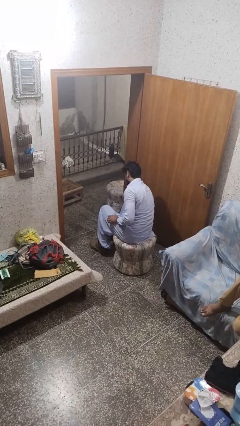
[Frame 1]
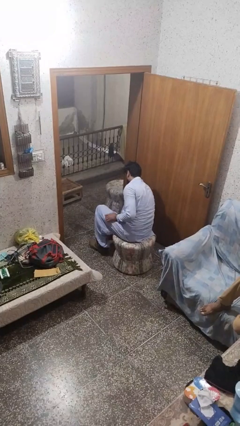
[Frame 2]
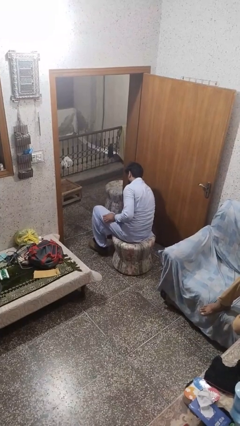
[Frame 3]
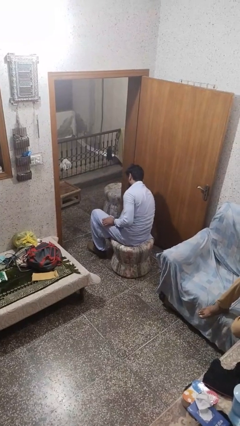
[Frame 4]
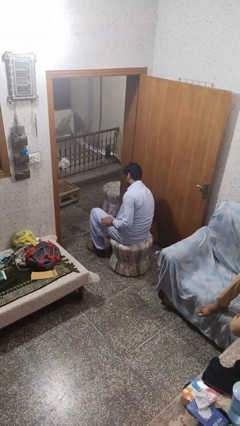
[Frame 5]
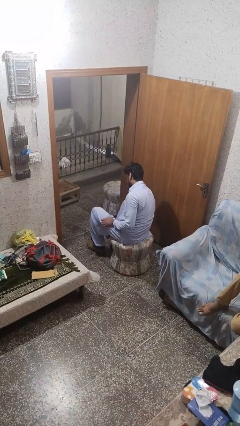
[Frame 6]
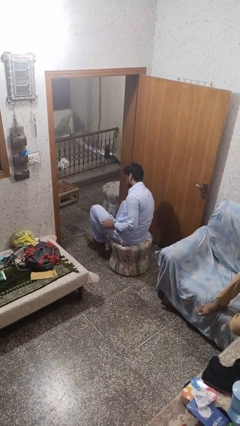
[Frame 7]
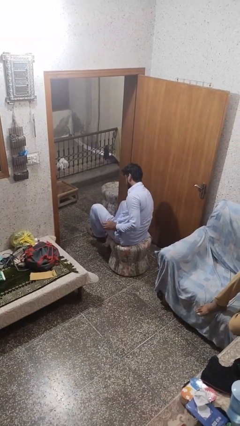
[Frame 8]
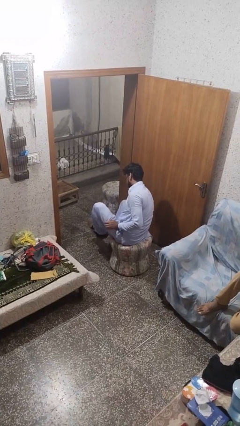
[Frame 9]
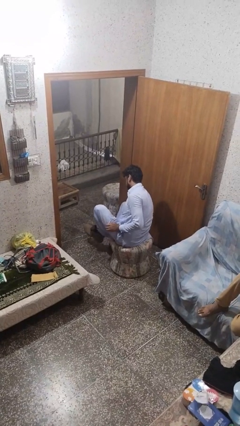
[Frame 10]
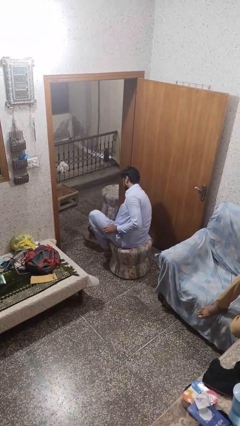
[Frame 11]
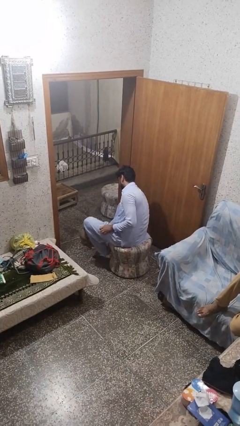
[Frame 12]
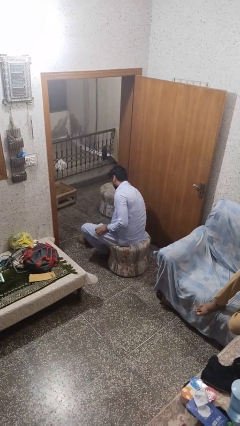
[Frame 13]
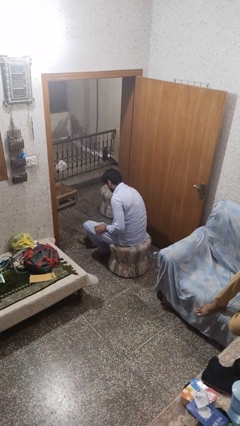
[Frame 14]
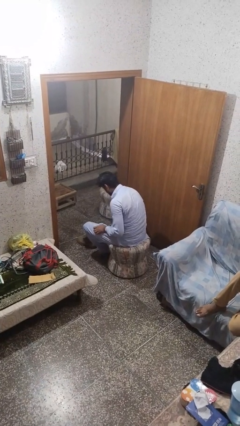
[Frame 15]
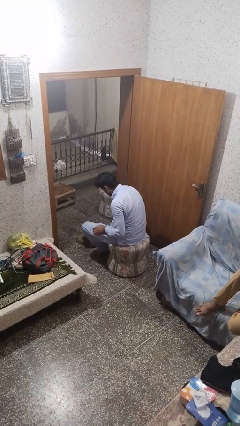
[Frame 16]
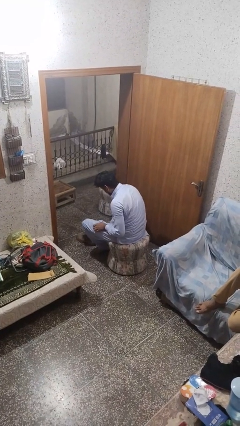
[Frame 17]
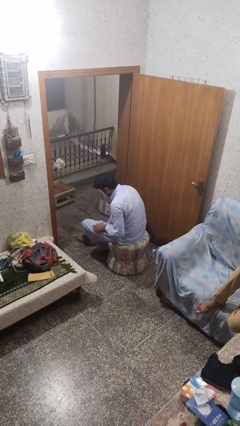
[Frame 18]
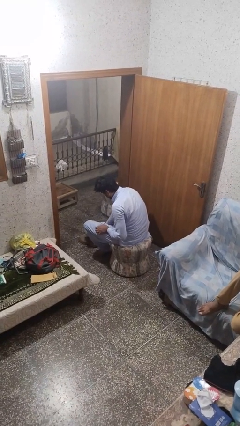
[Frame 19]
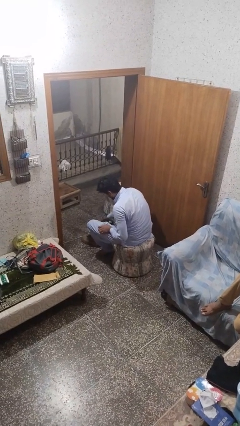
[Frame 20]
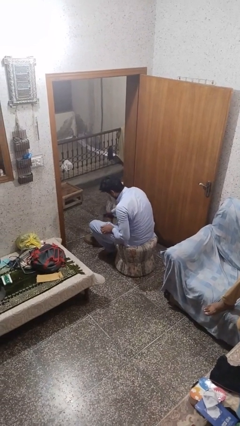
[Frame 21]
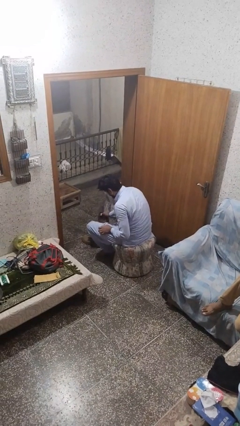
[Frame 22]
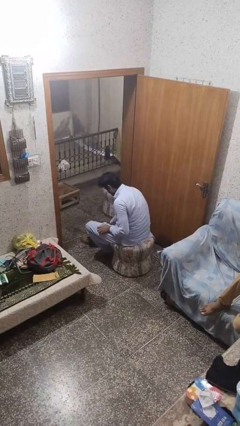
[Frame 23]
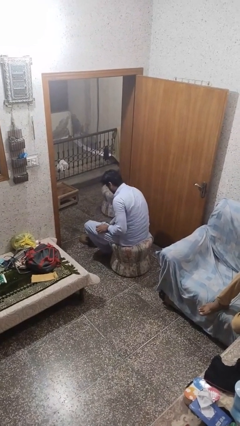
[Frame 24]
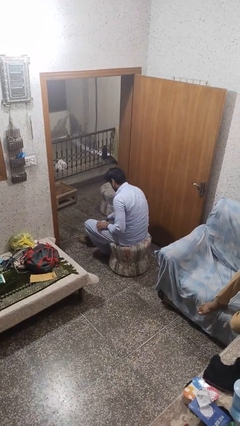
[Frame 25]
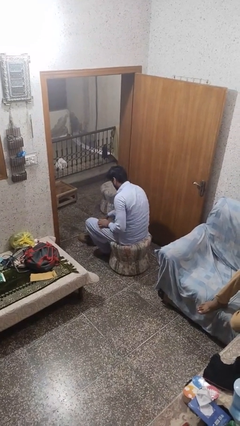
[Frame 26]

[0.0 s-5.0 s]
person takes off shoes

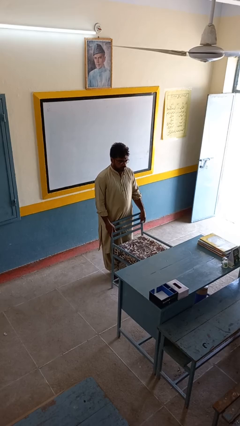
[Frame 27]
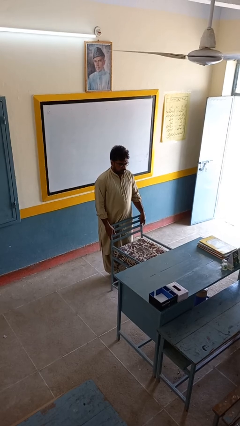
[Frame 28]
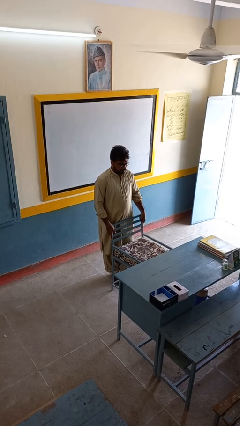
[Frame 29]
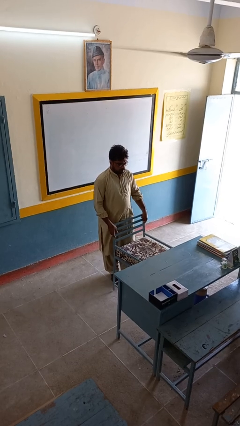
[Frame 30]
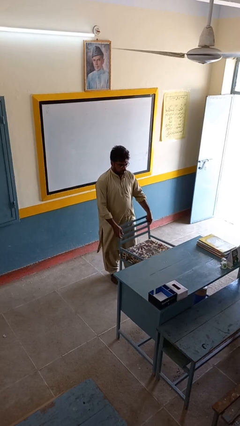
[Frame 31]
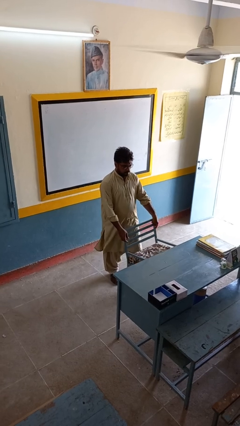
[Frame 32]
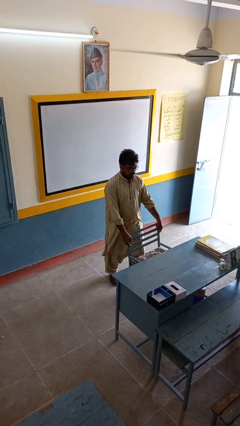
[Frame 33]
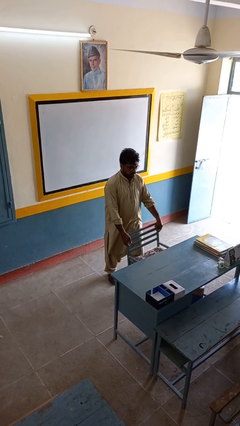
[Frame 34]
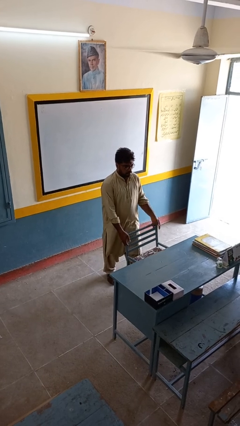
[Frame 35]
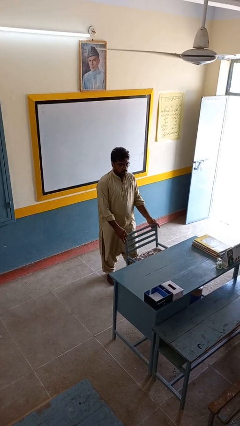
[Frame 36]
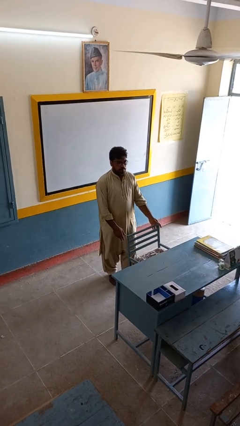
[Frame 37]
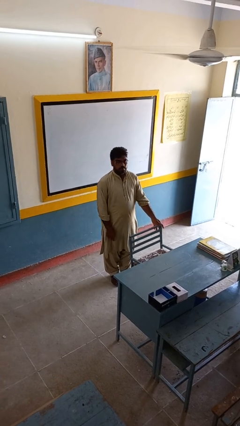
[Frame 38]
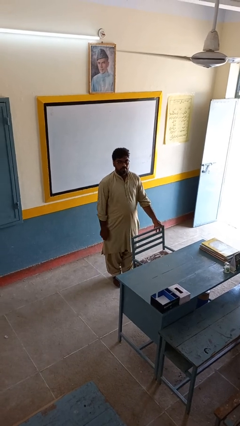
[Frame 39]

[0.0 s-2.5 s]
person pushes in chair

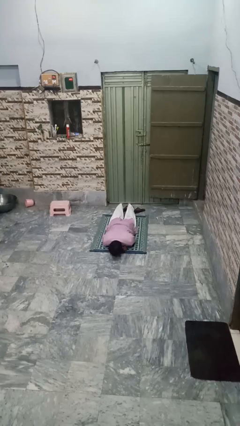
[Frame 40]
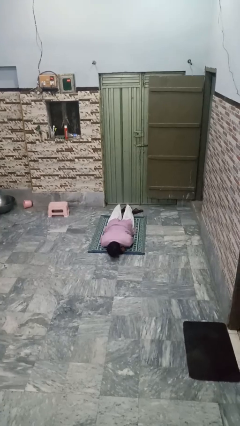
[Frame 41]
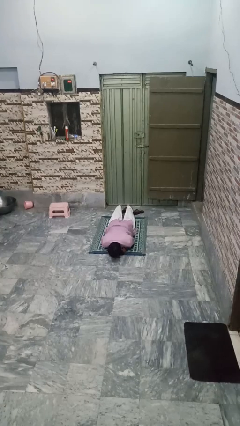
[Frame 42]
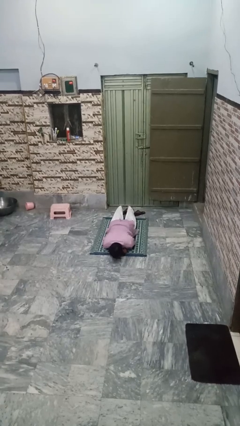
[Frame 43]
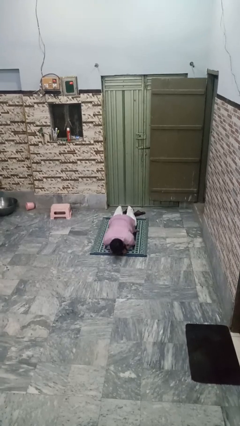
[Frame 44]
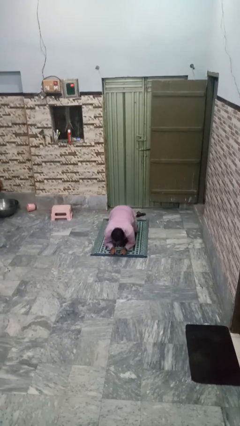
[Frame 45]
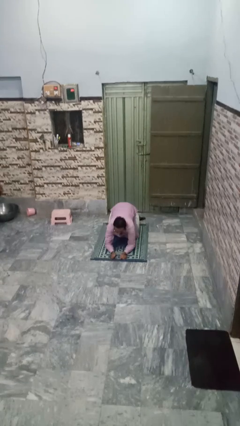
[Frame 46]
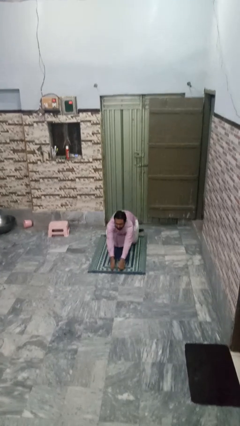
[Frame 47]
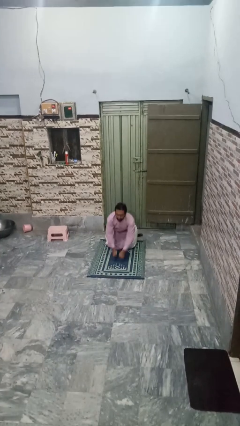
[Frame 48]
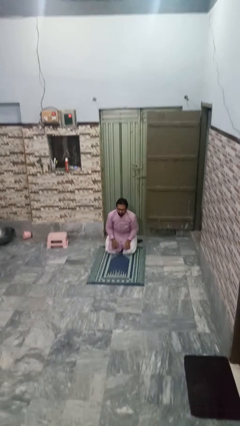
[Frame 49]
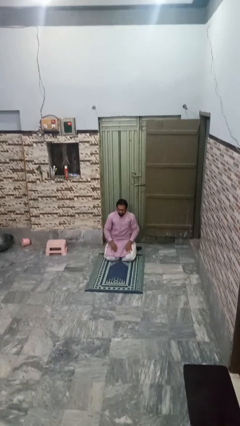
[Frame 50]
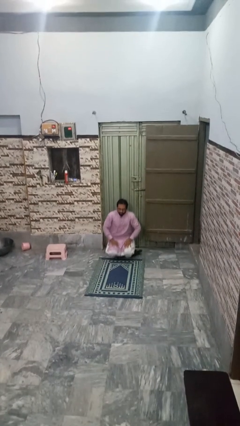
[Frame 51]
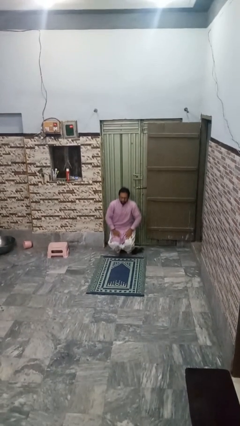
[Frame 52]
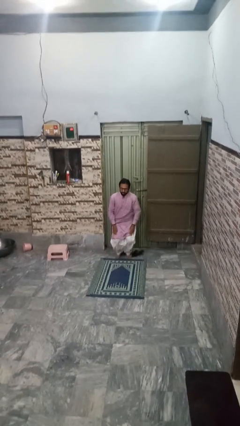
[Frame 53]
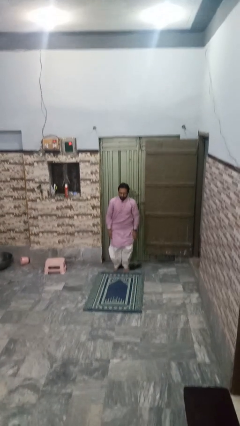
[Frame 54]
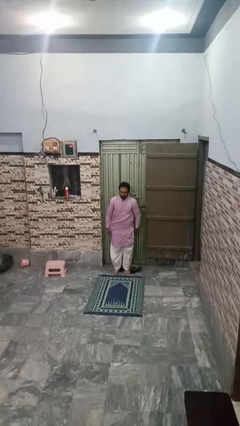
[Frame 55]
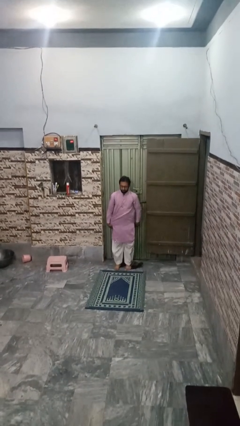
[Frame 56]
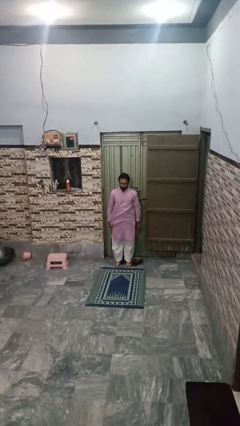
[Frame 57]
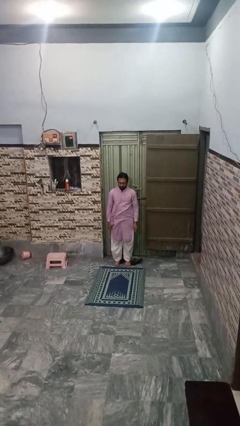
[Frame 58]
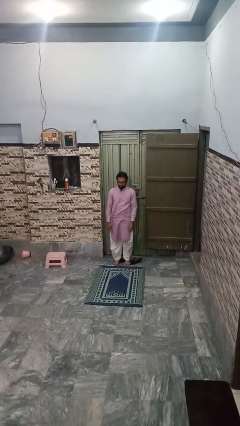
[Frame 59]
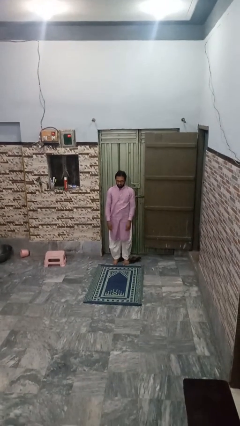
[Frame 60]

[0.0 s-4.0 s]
person stands up from floor

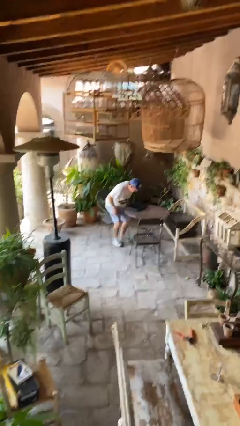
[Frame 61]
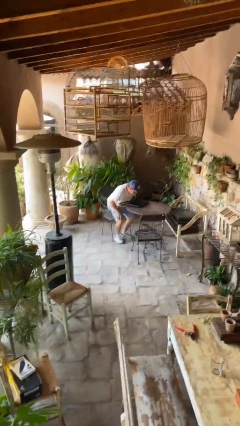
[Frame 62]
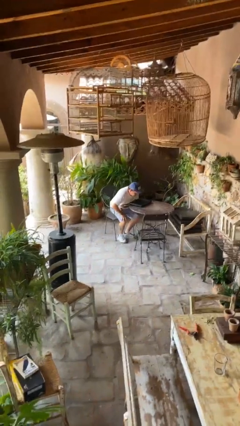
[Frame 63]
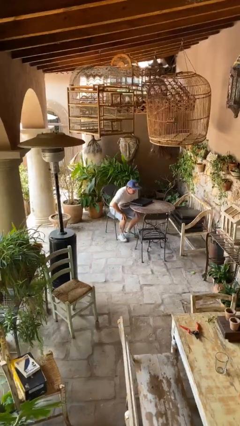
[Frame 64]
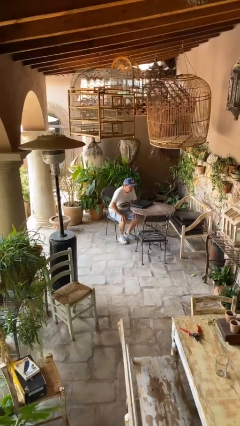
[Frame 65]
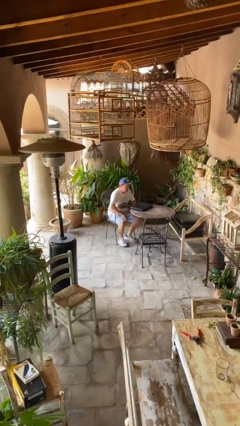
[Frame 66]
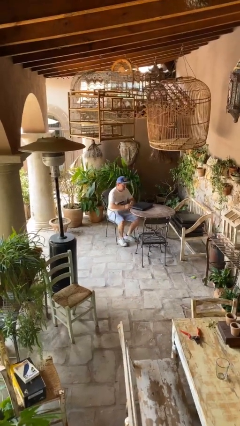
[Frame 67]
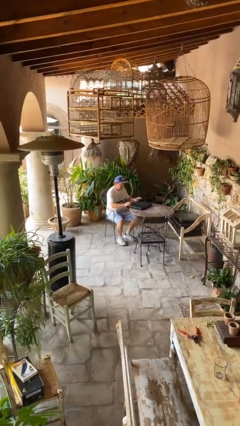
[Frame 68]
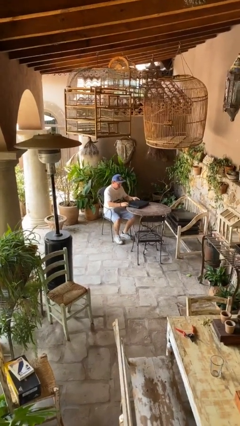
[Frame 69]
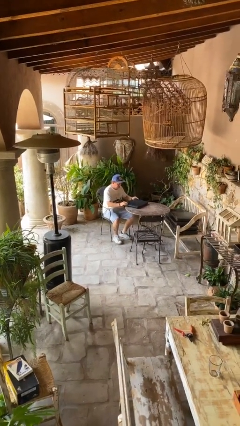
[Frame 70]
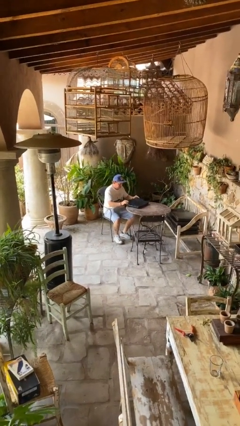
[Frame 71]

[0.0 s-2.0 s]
person sits down

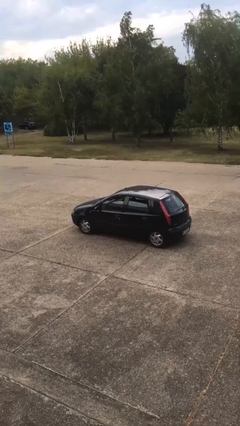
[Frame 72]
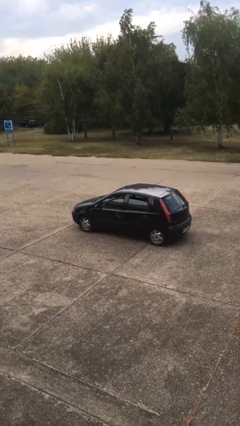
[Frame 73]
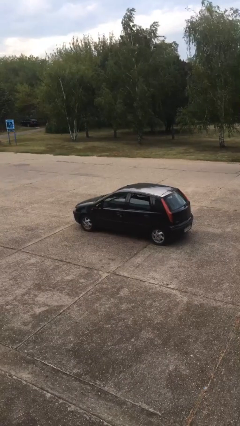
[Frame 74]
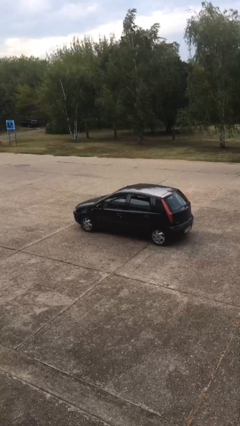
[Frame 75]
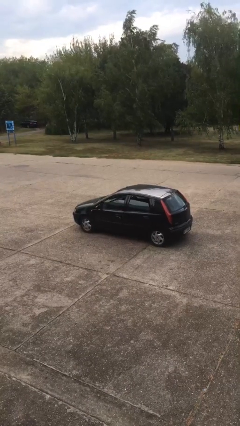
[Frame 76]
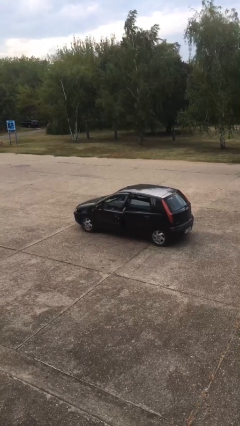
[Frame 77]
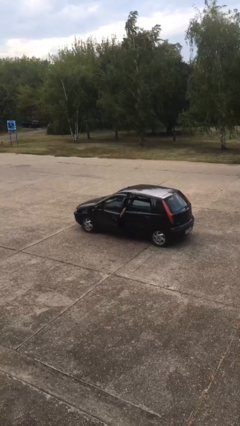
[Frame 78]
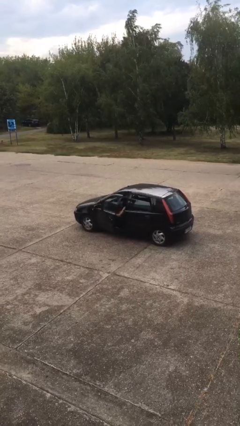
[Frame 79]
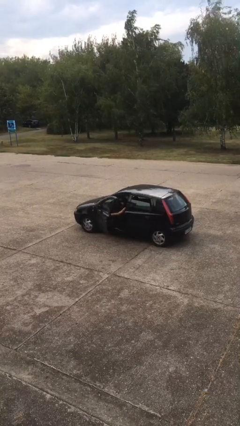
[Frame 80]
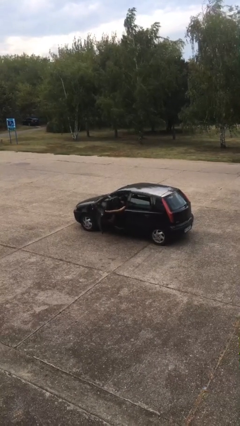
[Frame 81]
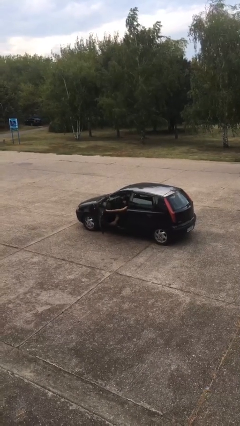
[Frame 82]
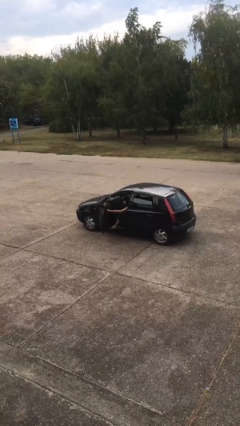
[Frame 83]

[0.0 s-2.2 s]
person opens car door

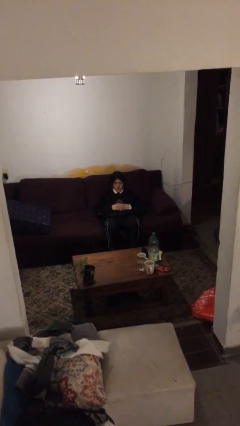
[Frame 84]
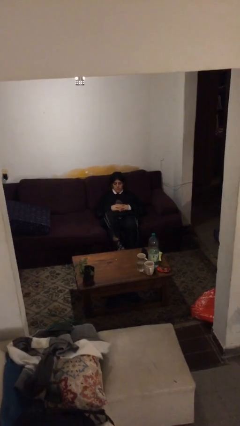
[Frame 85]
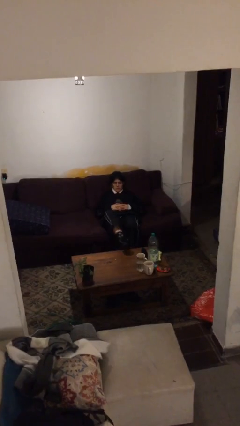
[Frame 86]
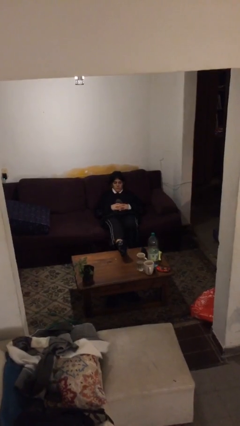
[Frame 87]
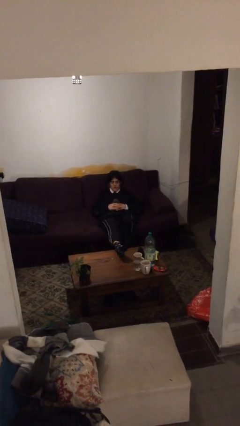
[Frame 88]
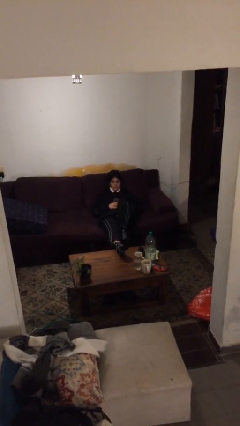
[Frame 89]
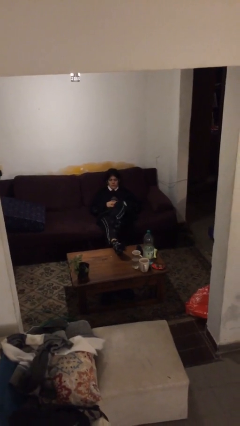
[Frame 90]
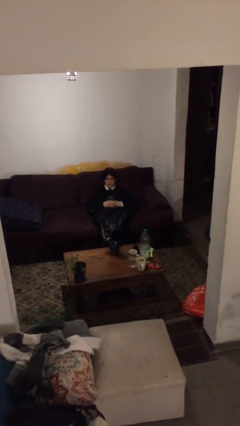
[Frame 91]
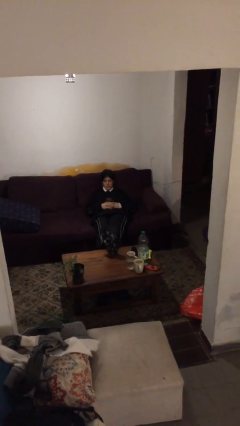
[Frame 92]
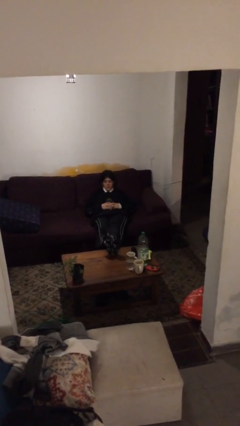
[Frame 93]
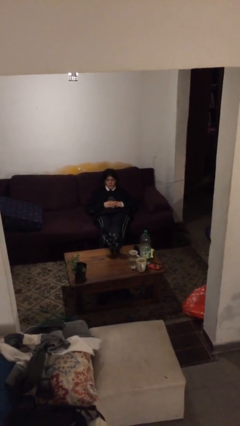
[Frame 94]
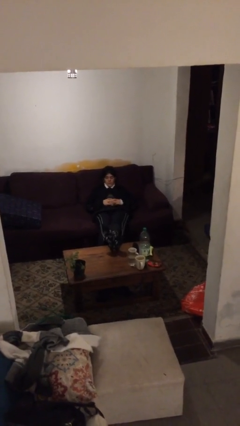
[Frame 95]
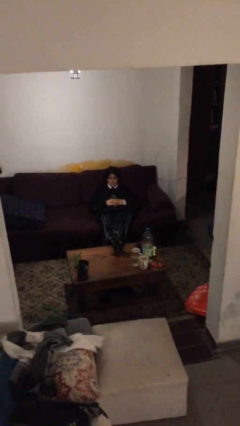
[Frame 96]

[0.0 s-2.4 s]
person puts feet up
